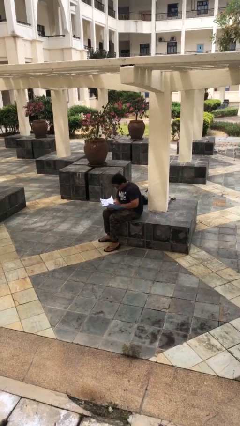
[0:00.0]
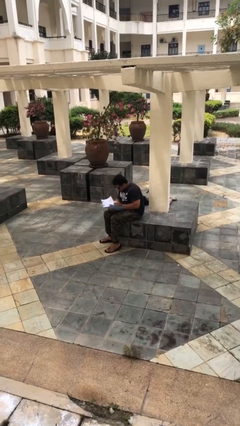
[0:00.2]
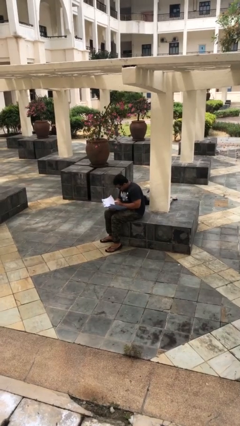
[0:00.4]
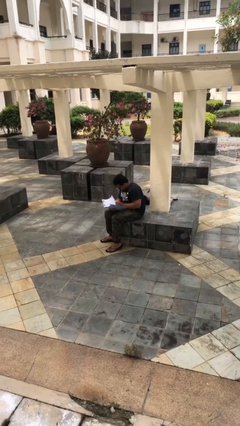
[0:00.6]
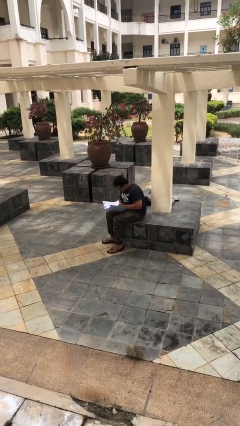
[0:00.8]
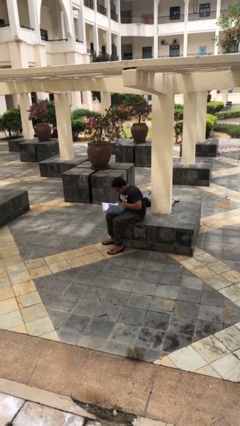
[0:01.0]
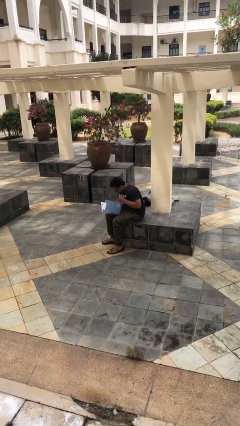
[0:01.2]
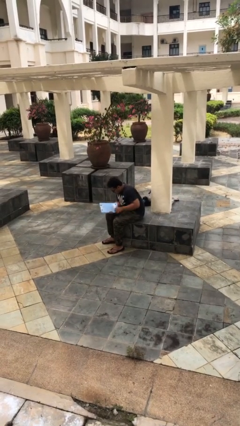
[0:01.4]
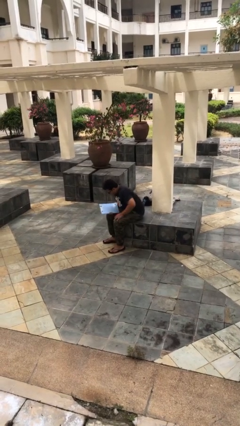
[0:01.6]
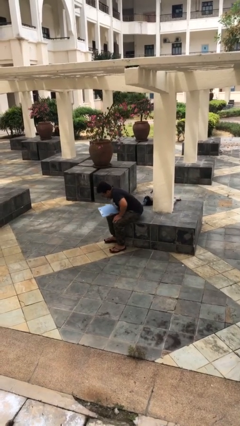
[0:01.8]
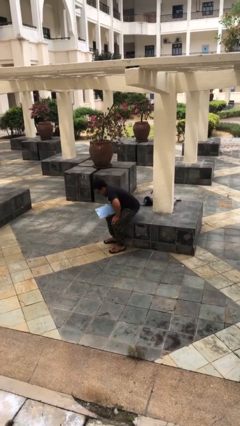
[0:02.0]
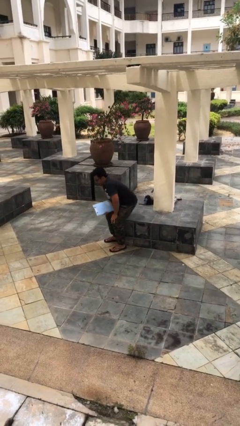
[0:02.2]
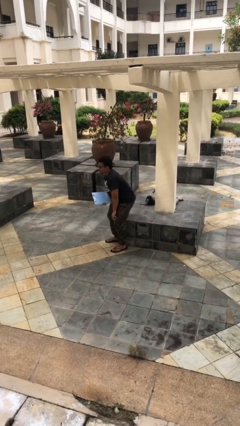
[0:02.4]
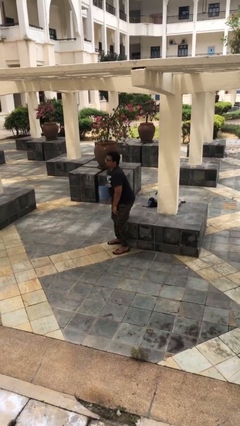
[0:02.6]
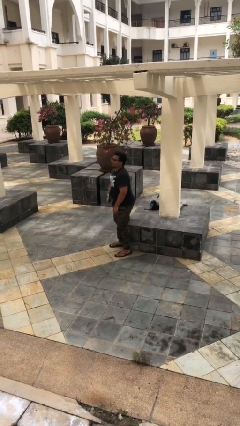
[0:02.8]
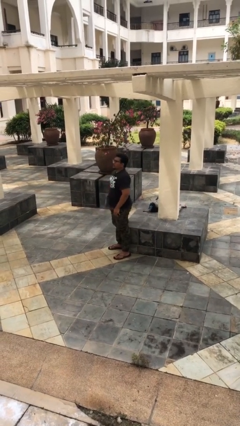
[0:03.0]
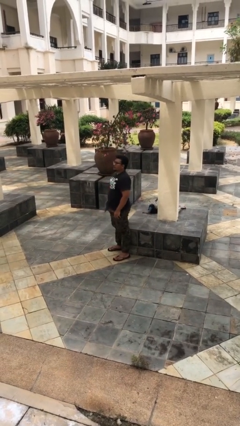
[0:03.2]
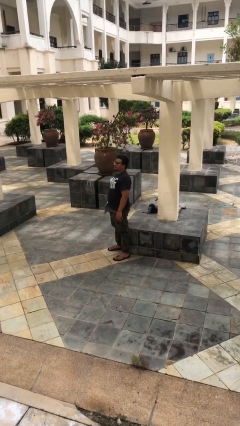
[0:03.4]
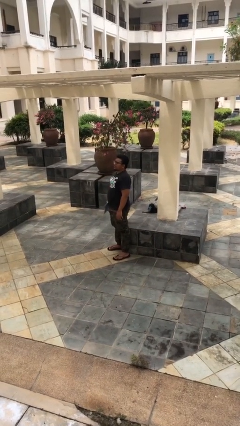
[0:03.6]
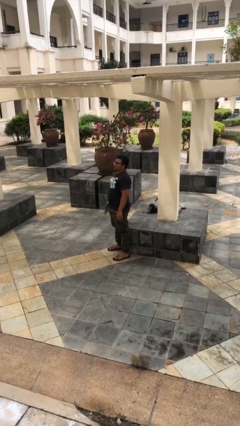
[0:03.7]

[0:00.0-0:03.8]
person stands up

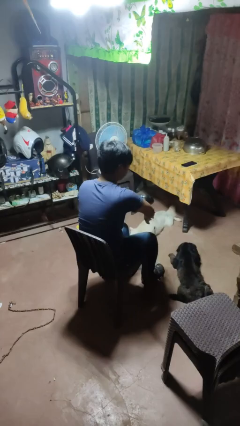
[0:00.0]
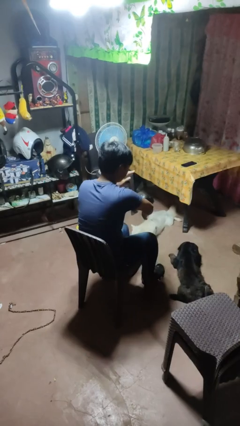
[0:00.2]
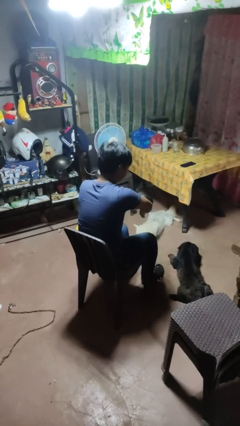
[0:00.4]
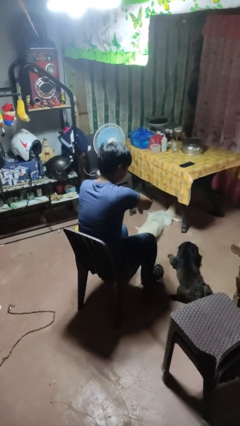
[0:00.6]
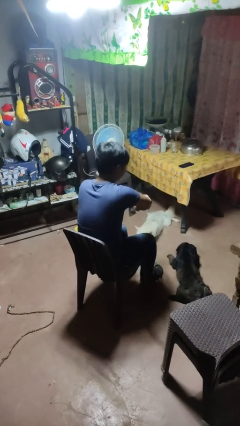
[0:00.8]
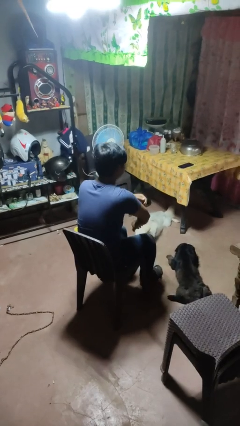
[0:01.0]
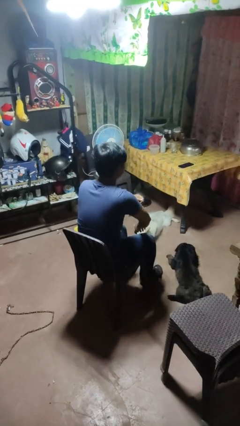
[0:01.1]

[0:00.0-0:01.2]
person swats bug

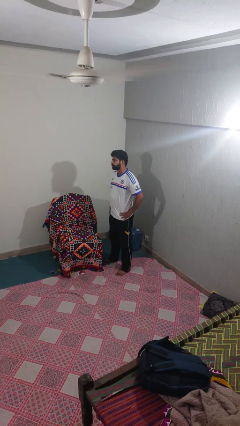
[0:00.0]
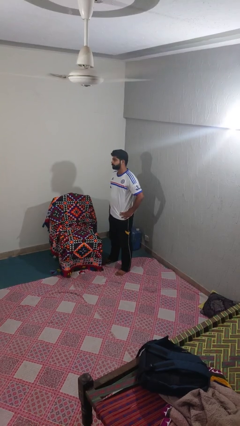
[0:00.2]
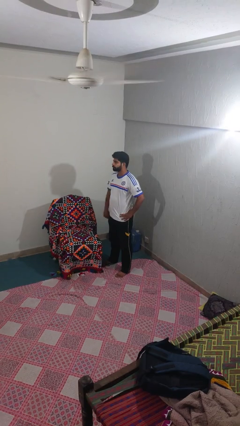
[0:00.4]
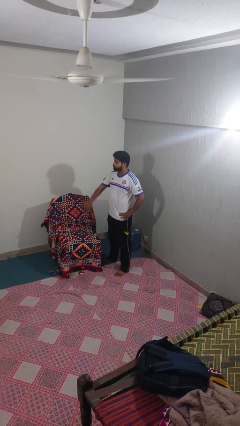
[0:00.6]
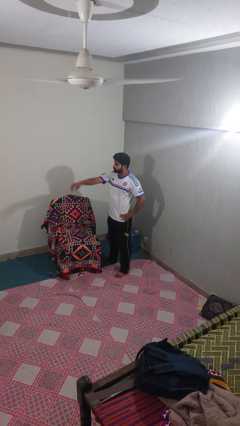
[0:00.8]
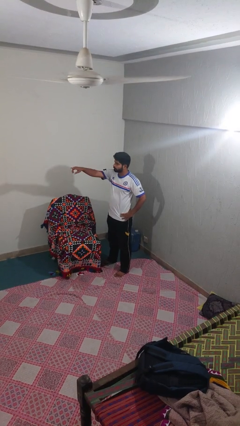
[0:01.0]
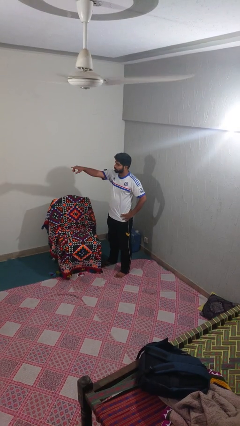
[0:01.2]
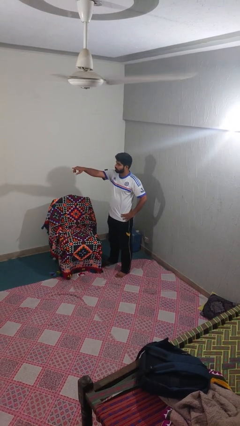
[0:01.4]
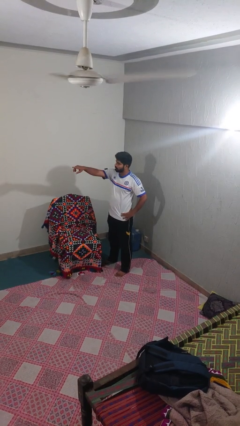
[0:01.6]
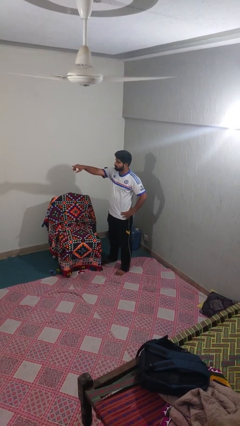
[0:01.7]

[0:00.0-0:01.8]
person points at person

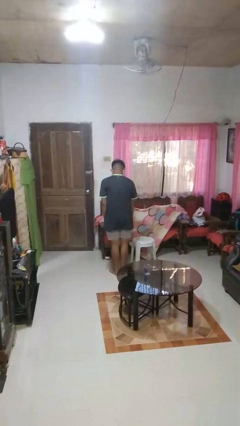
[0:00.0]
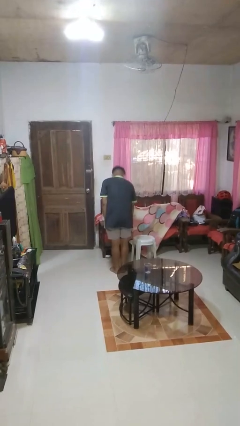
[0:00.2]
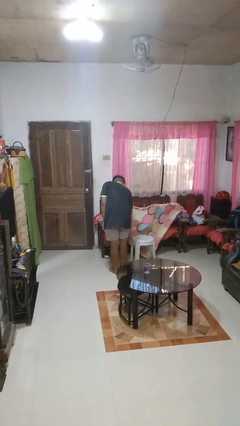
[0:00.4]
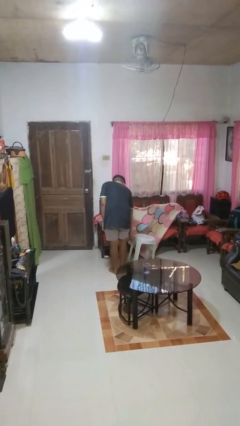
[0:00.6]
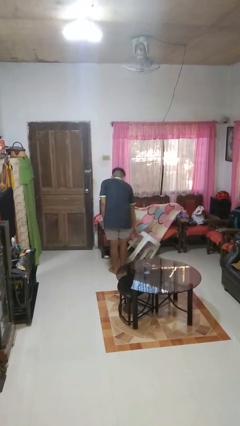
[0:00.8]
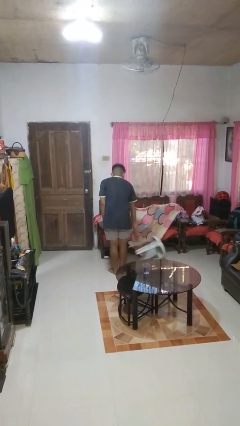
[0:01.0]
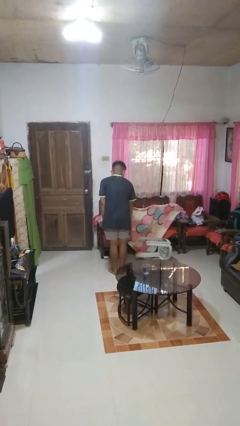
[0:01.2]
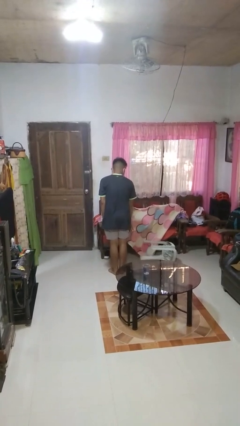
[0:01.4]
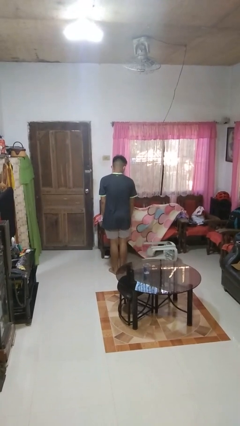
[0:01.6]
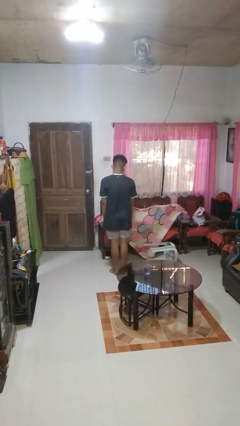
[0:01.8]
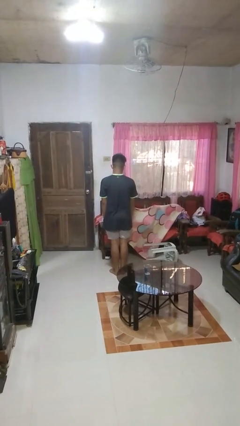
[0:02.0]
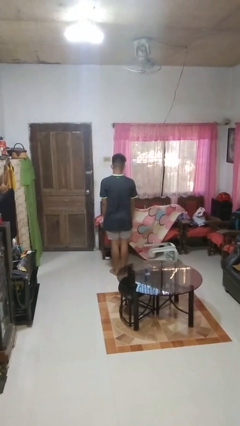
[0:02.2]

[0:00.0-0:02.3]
person knocks over furniture

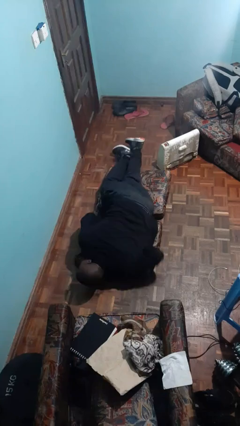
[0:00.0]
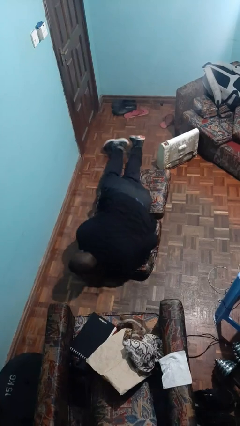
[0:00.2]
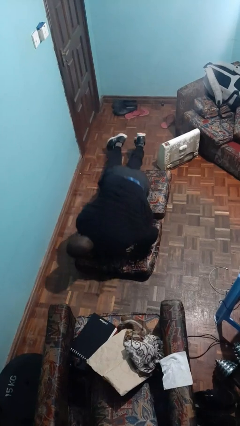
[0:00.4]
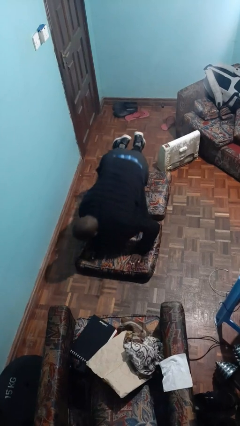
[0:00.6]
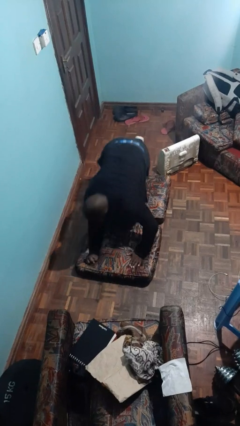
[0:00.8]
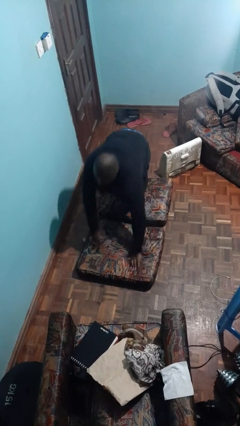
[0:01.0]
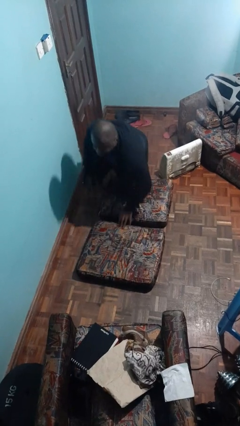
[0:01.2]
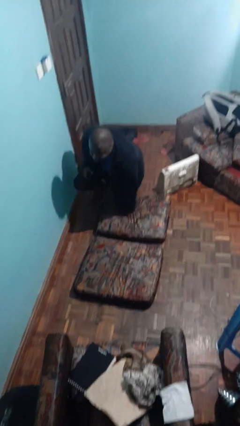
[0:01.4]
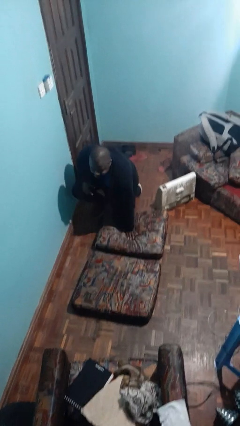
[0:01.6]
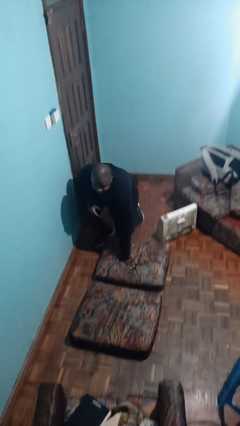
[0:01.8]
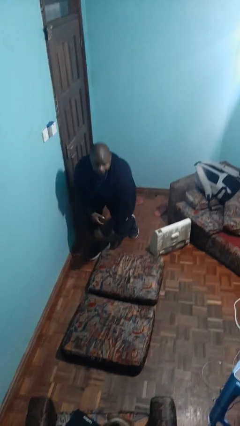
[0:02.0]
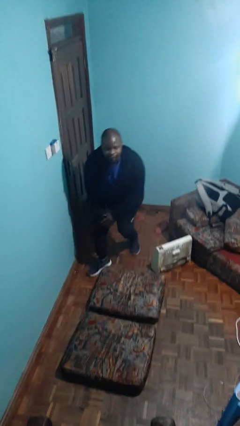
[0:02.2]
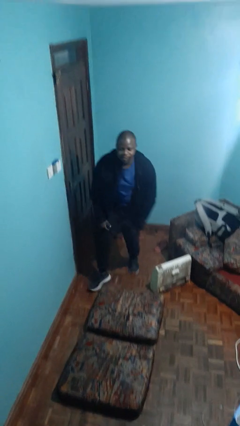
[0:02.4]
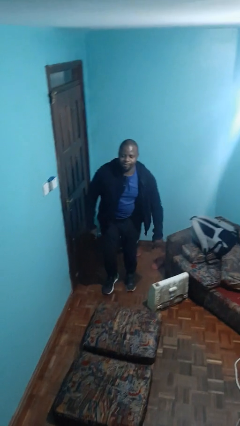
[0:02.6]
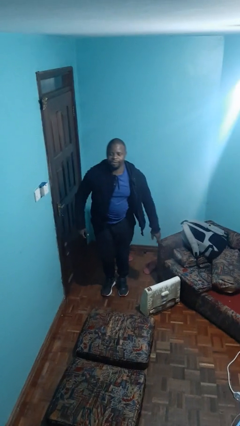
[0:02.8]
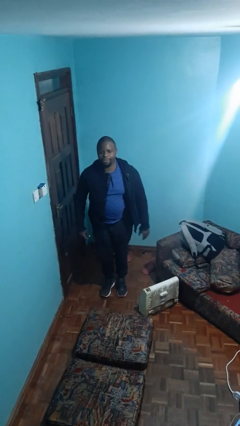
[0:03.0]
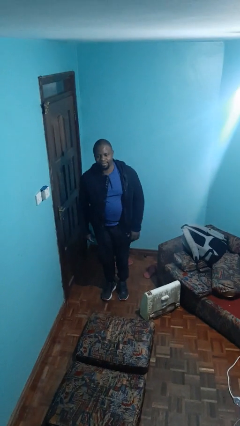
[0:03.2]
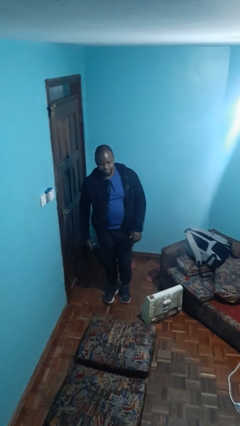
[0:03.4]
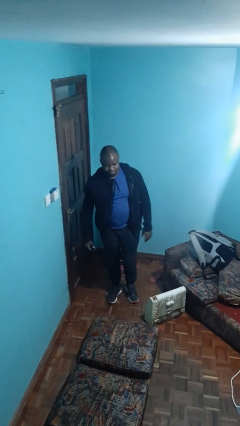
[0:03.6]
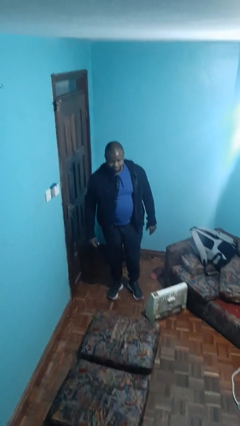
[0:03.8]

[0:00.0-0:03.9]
person stands up from floor

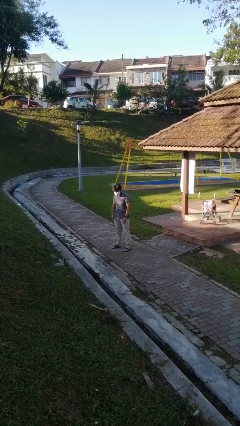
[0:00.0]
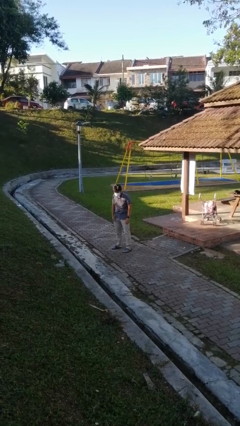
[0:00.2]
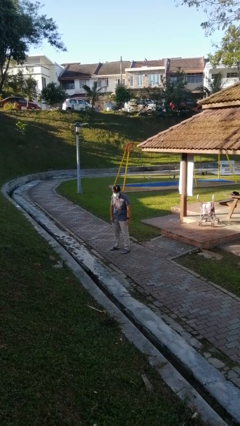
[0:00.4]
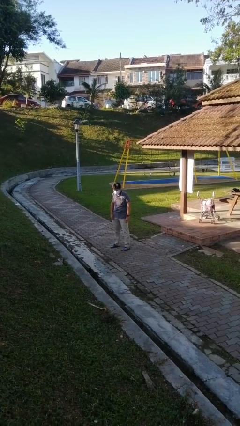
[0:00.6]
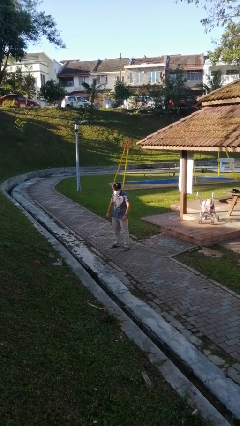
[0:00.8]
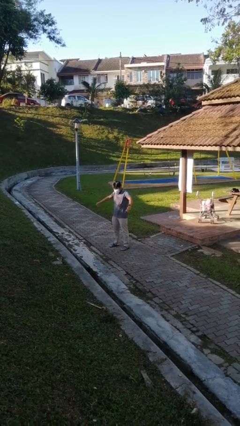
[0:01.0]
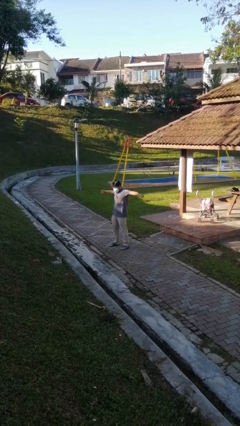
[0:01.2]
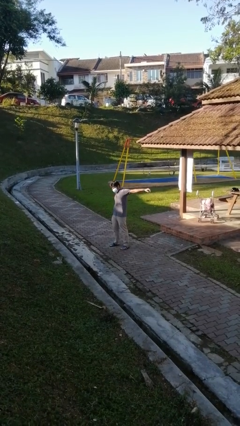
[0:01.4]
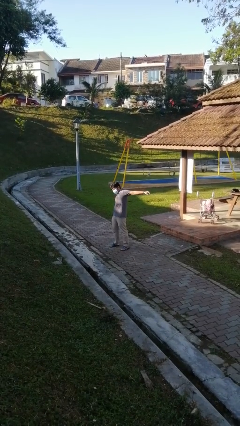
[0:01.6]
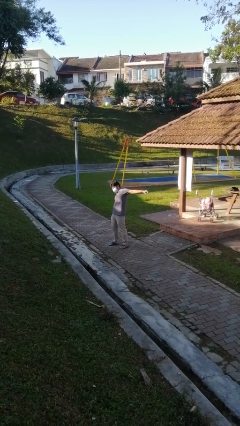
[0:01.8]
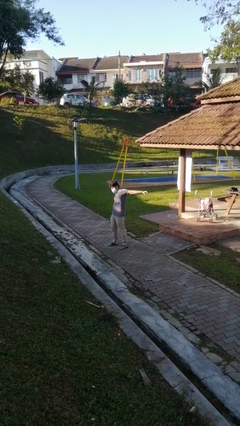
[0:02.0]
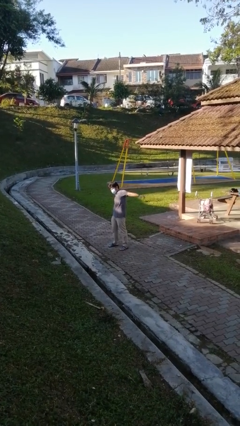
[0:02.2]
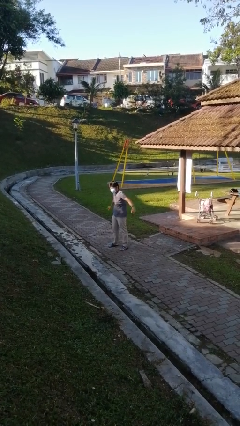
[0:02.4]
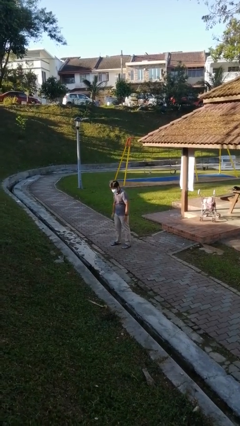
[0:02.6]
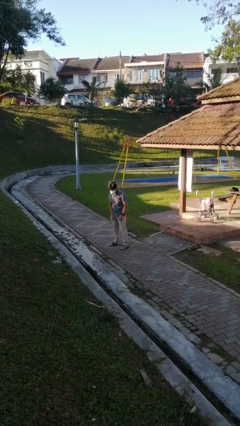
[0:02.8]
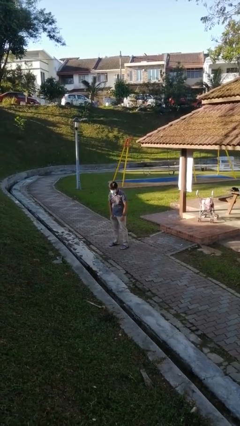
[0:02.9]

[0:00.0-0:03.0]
person stretches arms to side

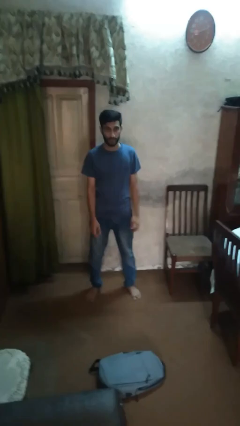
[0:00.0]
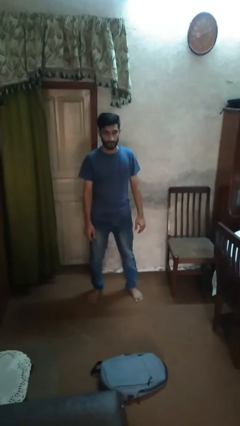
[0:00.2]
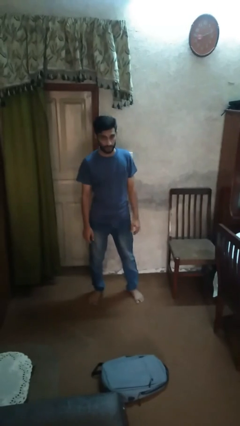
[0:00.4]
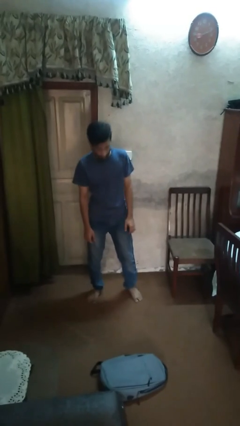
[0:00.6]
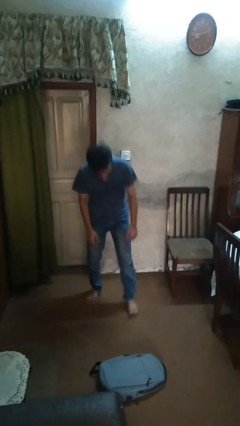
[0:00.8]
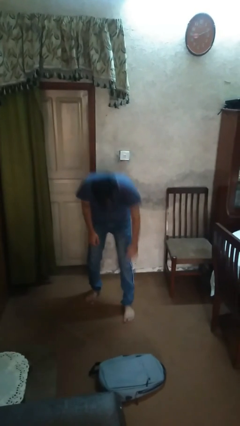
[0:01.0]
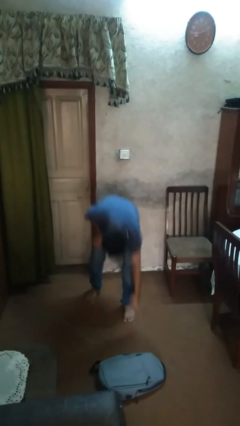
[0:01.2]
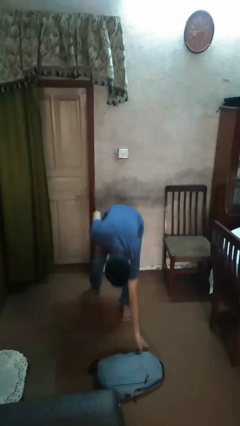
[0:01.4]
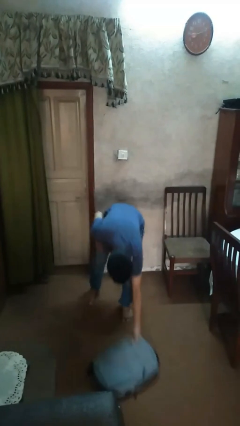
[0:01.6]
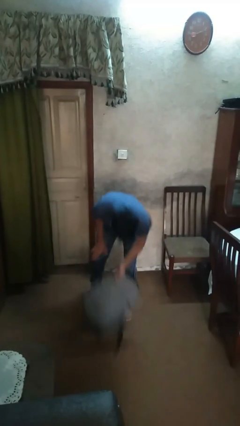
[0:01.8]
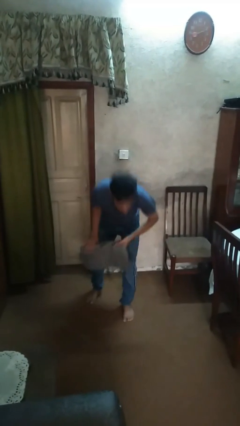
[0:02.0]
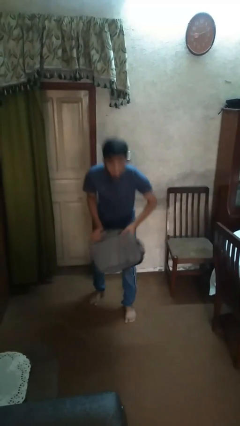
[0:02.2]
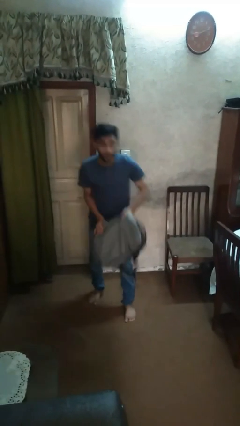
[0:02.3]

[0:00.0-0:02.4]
person picks up object from floor
